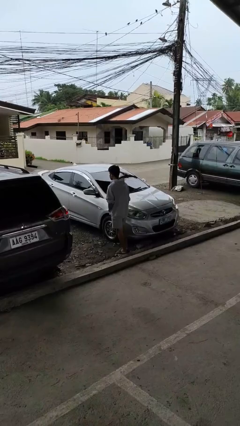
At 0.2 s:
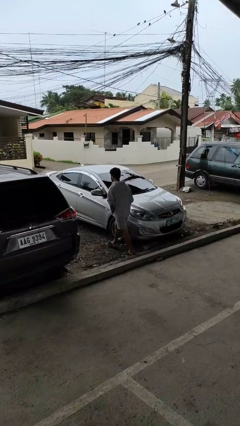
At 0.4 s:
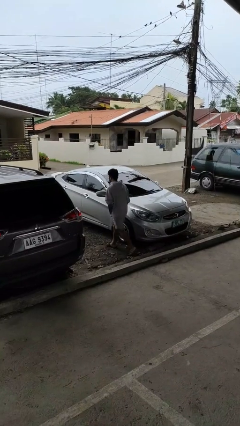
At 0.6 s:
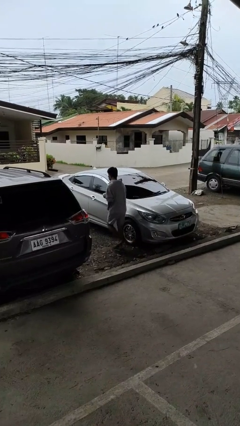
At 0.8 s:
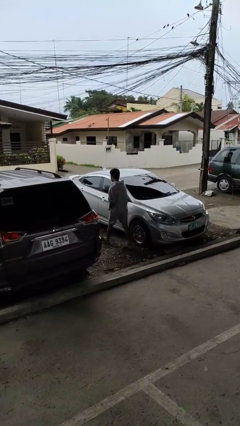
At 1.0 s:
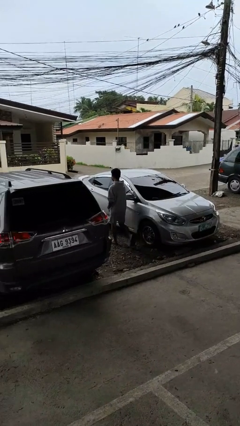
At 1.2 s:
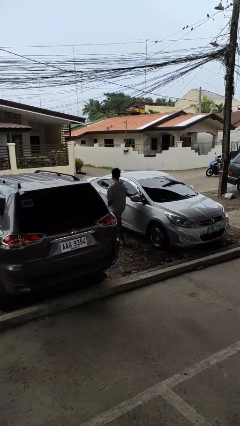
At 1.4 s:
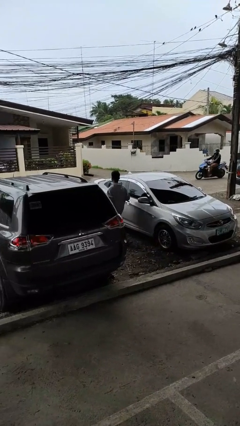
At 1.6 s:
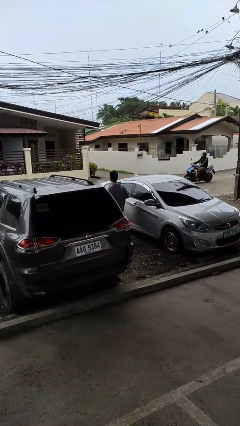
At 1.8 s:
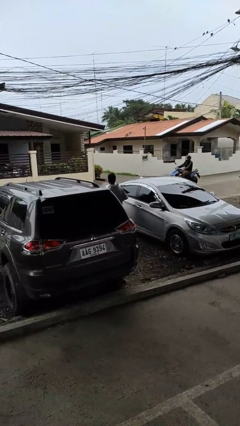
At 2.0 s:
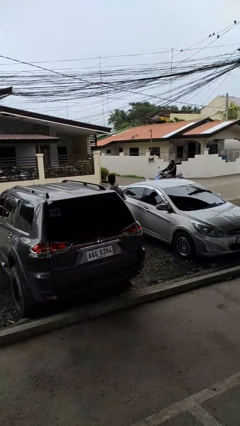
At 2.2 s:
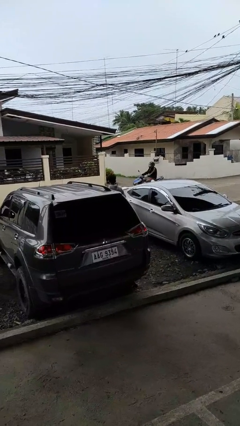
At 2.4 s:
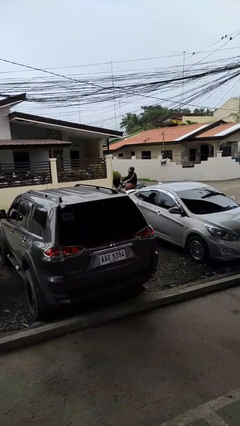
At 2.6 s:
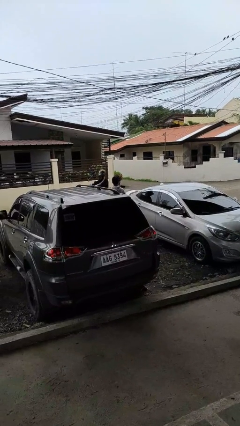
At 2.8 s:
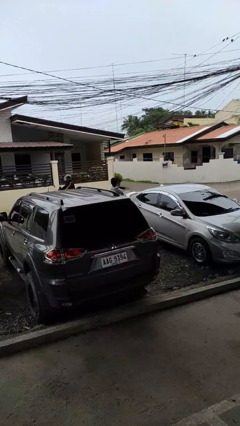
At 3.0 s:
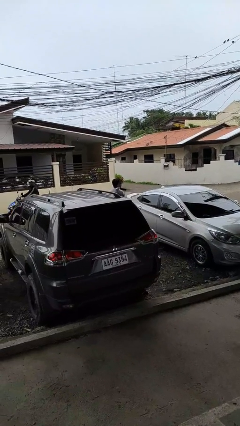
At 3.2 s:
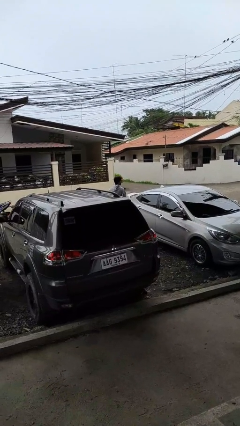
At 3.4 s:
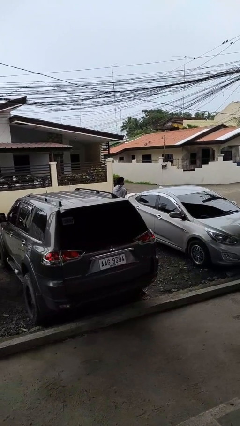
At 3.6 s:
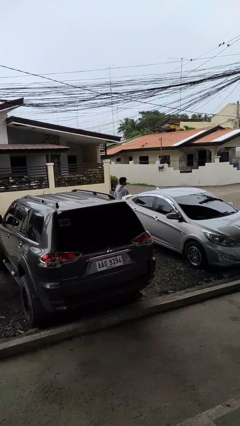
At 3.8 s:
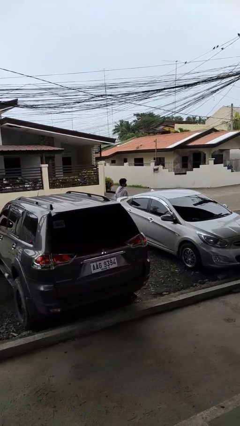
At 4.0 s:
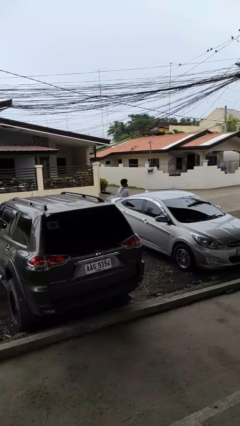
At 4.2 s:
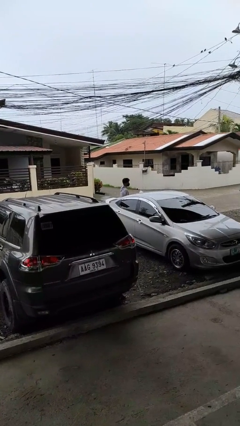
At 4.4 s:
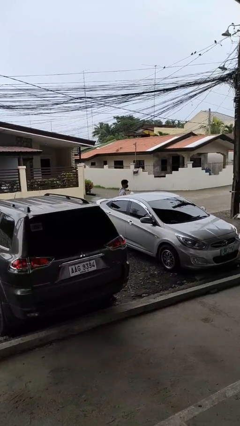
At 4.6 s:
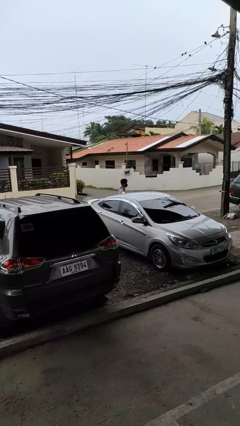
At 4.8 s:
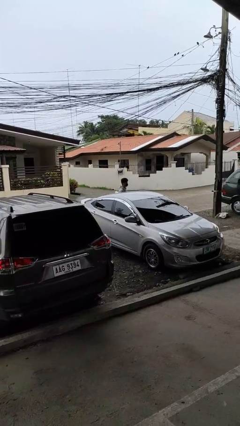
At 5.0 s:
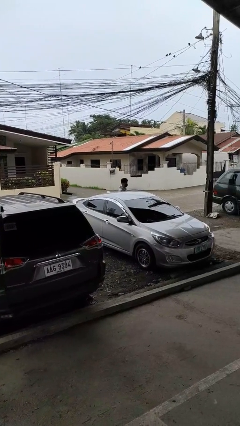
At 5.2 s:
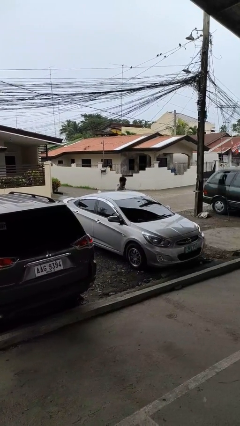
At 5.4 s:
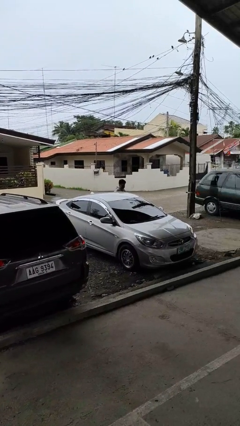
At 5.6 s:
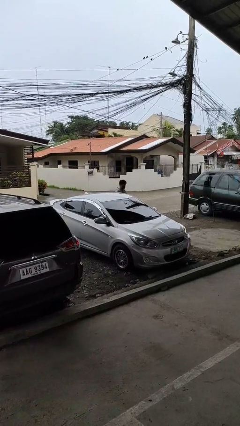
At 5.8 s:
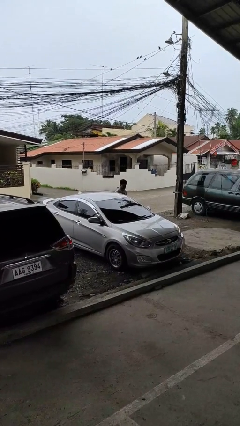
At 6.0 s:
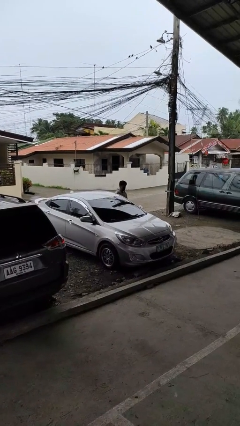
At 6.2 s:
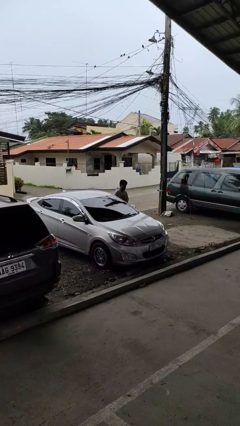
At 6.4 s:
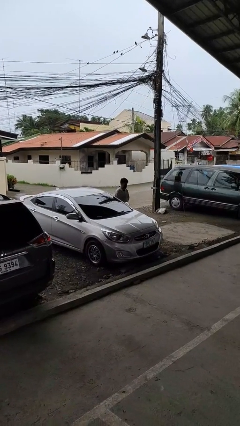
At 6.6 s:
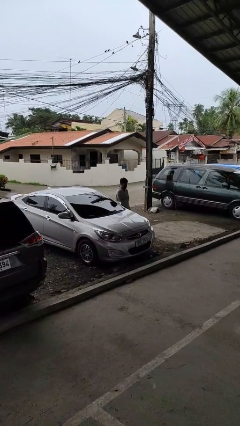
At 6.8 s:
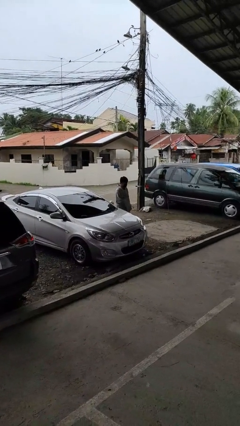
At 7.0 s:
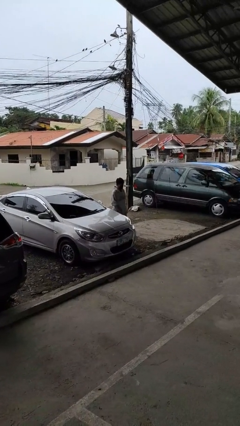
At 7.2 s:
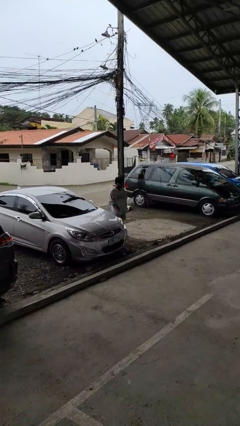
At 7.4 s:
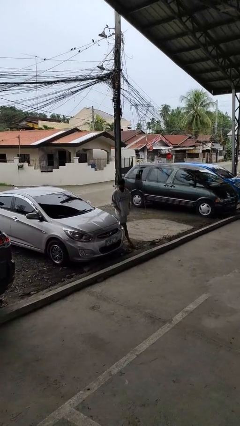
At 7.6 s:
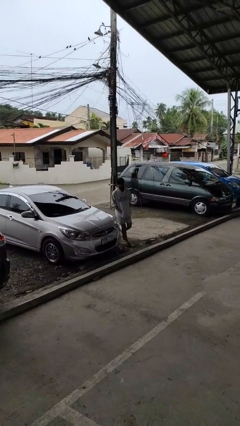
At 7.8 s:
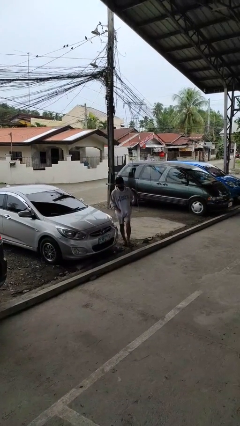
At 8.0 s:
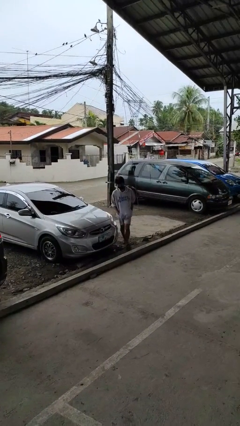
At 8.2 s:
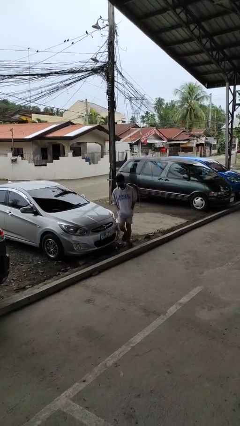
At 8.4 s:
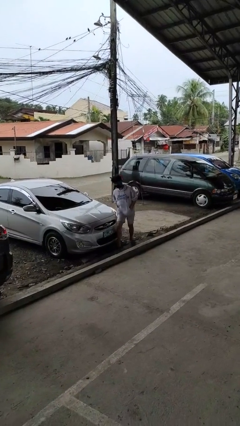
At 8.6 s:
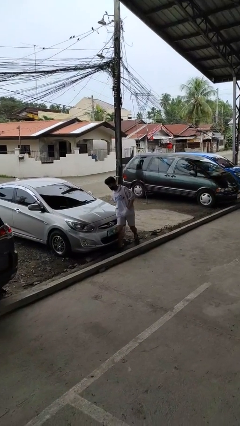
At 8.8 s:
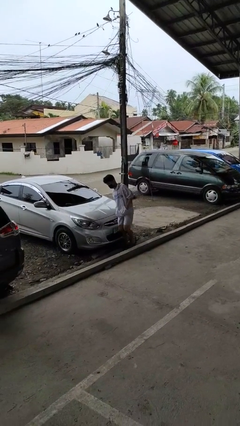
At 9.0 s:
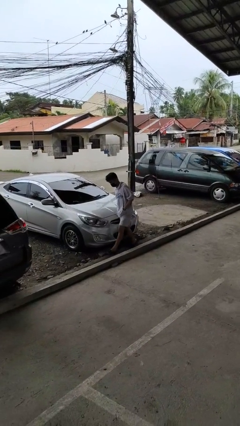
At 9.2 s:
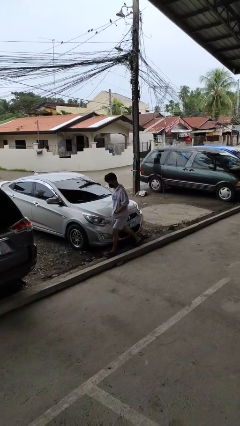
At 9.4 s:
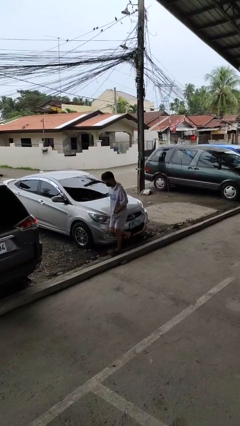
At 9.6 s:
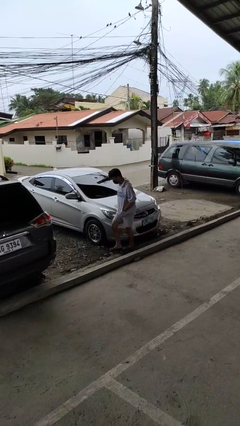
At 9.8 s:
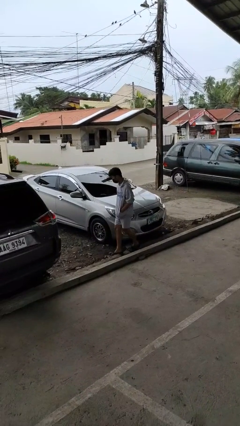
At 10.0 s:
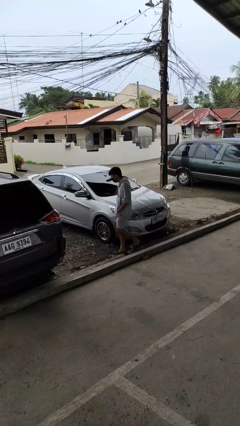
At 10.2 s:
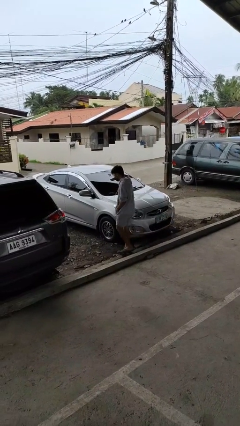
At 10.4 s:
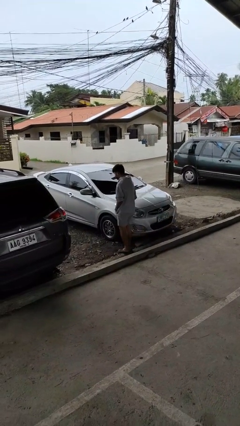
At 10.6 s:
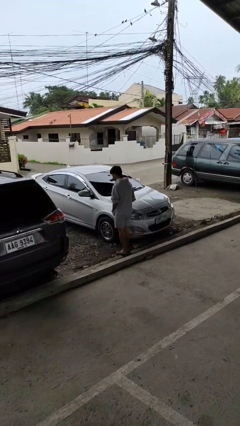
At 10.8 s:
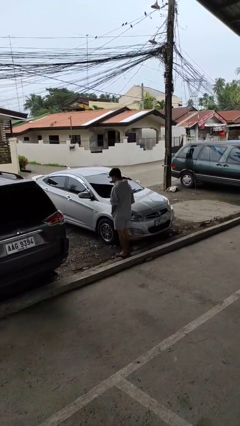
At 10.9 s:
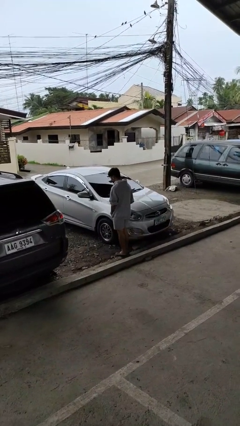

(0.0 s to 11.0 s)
person walks around car

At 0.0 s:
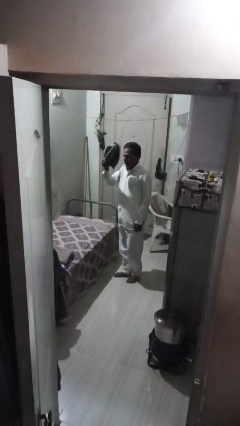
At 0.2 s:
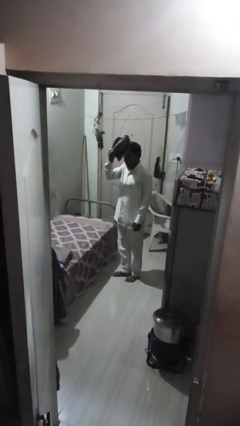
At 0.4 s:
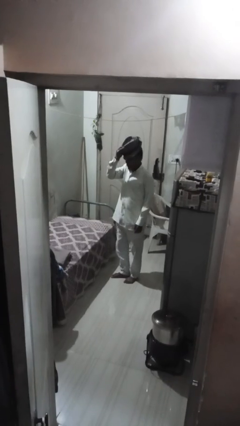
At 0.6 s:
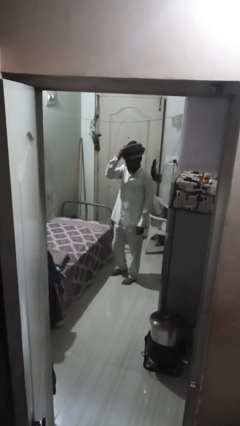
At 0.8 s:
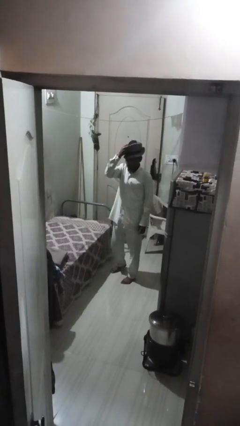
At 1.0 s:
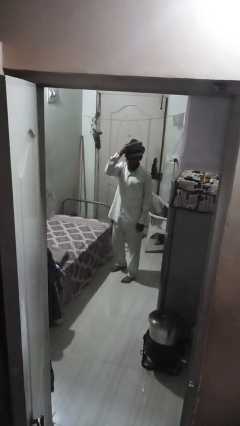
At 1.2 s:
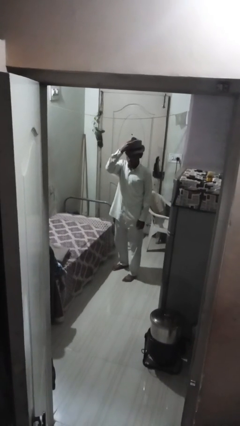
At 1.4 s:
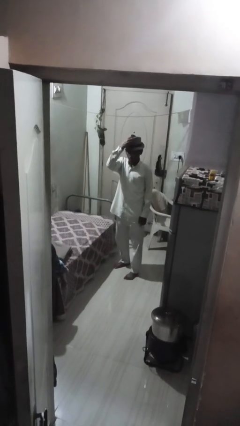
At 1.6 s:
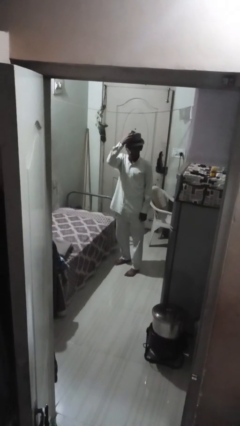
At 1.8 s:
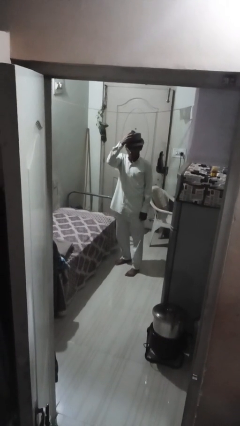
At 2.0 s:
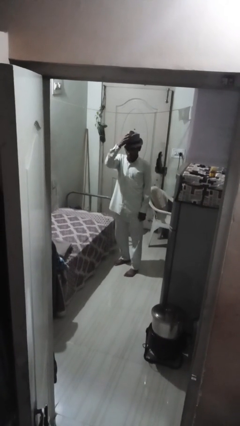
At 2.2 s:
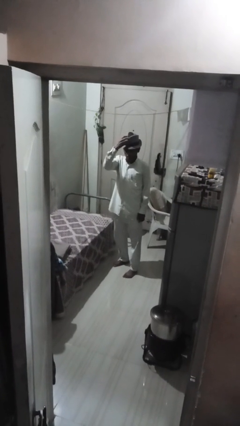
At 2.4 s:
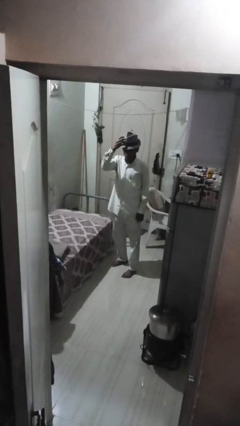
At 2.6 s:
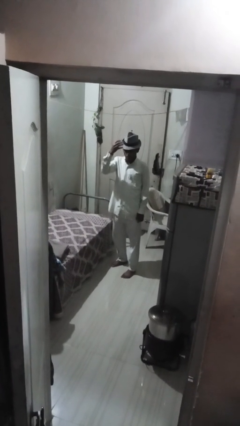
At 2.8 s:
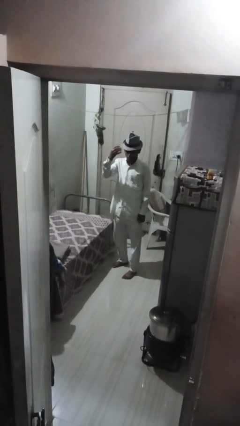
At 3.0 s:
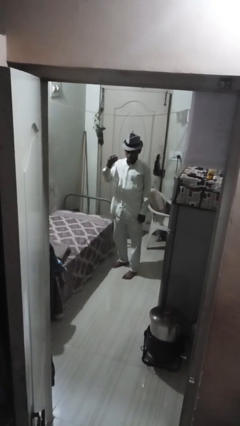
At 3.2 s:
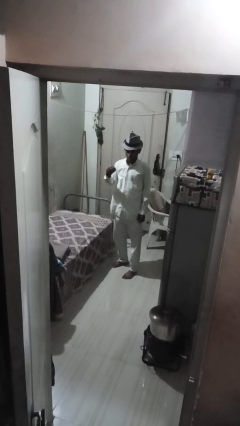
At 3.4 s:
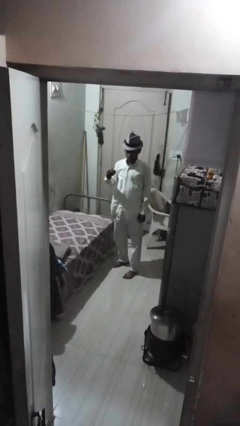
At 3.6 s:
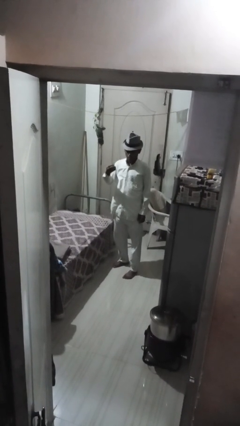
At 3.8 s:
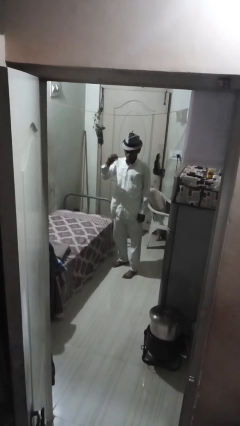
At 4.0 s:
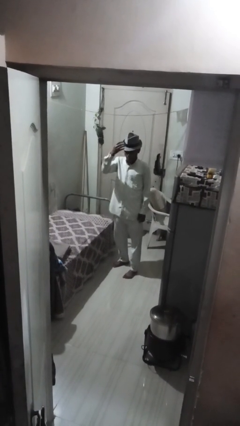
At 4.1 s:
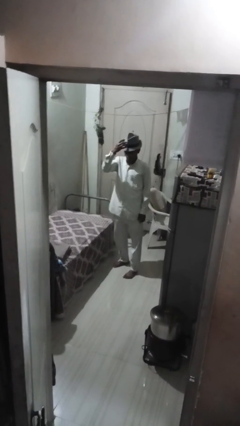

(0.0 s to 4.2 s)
person puts on hat

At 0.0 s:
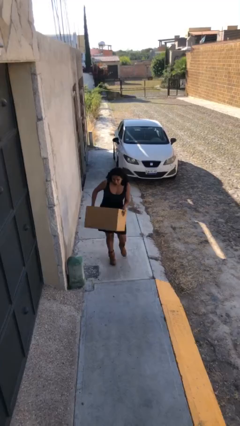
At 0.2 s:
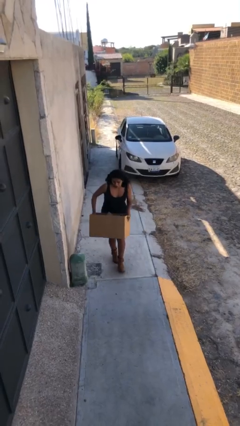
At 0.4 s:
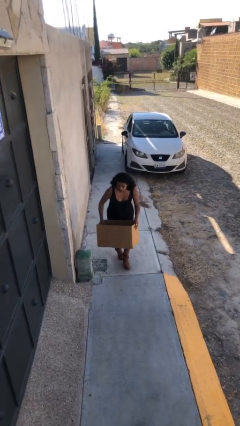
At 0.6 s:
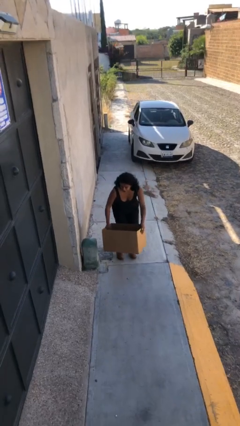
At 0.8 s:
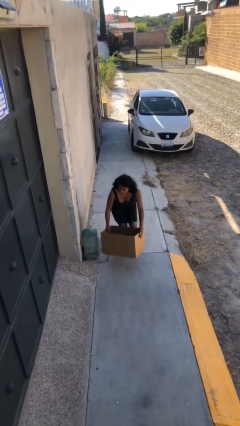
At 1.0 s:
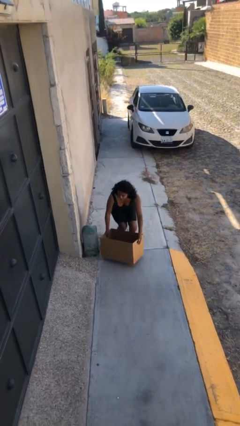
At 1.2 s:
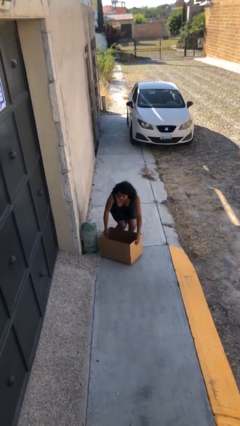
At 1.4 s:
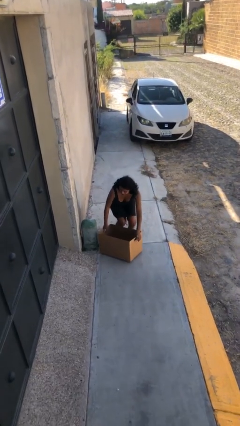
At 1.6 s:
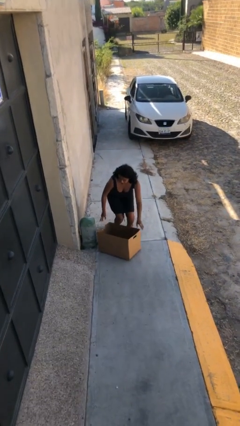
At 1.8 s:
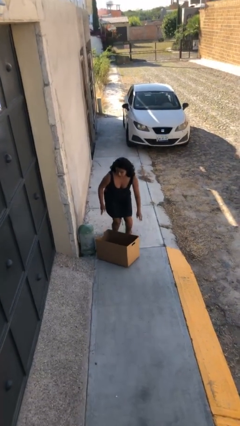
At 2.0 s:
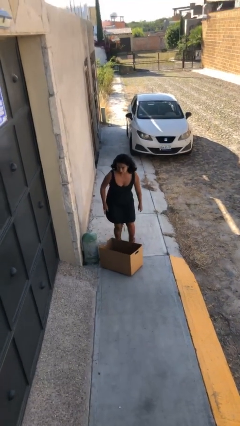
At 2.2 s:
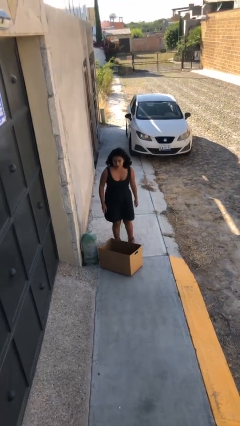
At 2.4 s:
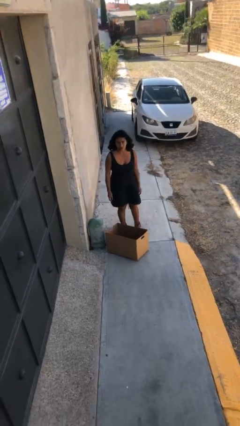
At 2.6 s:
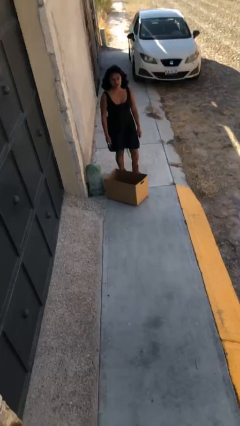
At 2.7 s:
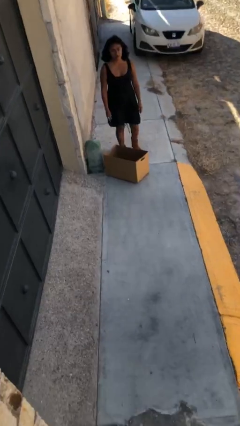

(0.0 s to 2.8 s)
person puts down object on floor
